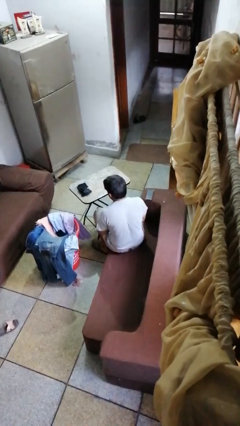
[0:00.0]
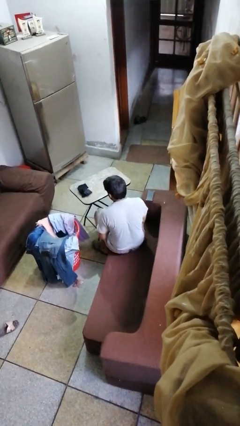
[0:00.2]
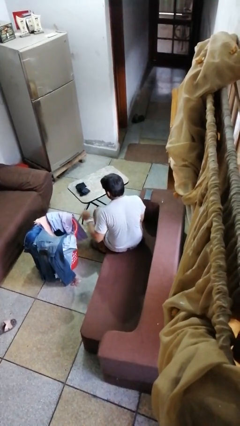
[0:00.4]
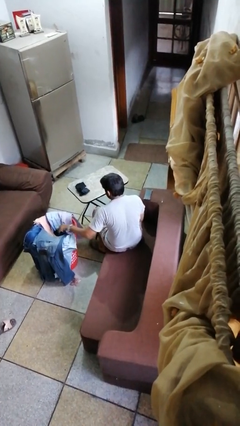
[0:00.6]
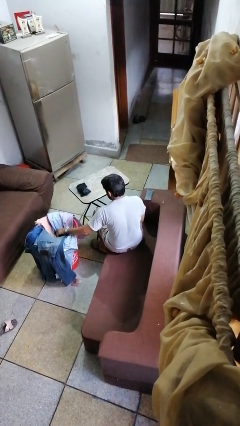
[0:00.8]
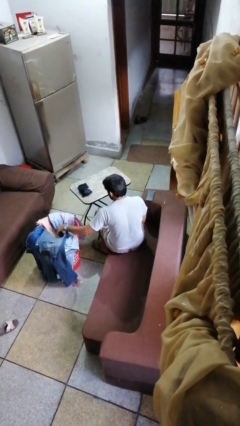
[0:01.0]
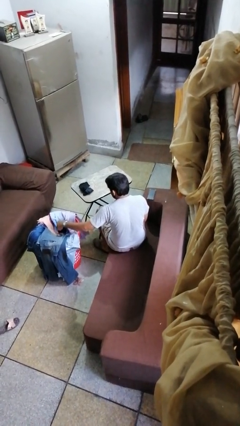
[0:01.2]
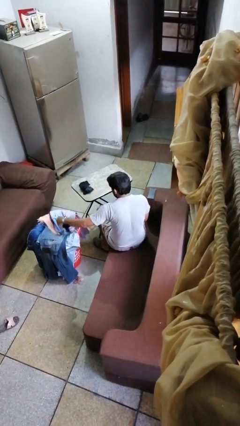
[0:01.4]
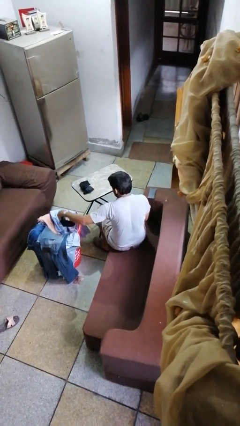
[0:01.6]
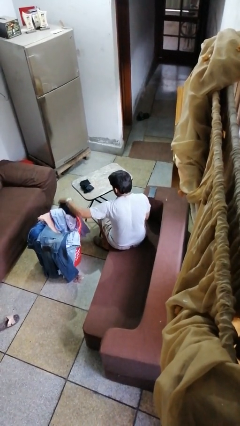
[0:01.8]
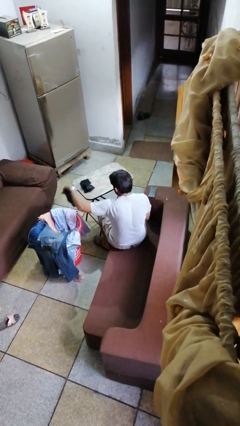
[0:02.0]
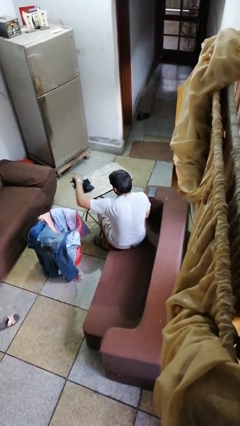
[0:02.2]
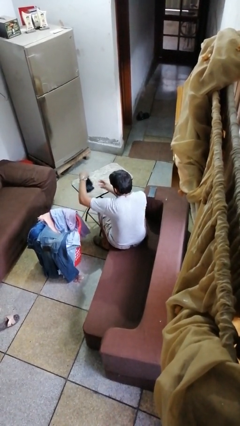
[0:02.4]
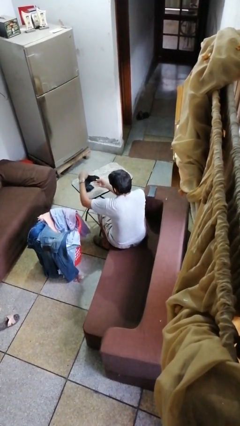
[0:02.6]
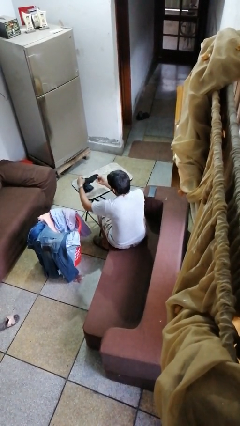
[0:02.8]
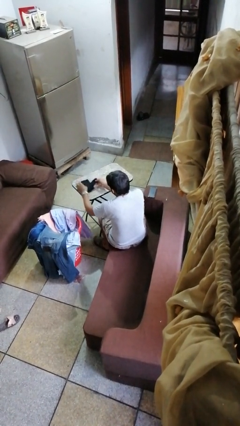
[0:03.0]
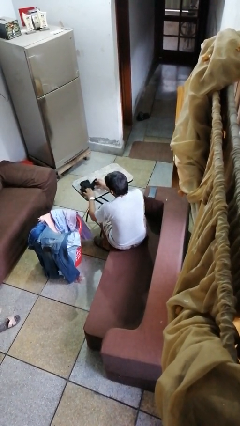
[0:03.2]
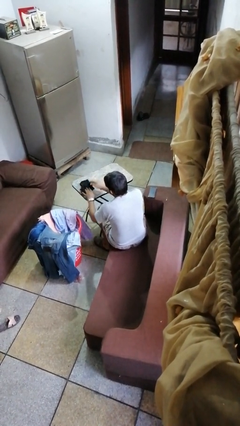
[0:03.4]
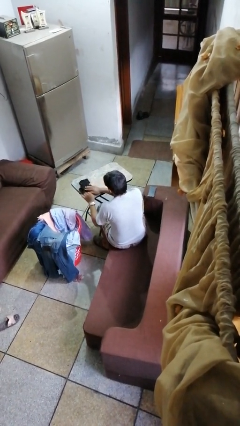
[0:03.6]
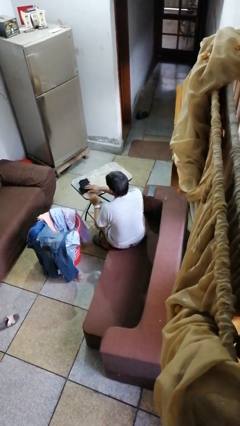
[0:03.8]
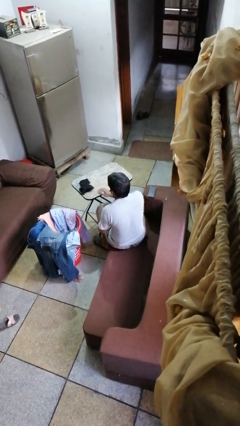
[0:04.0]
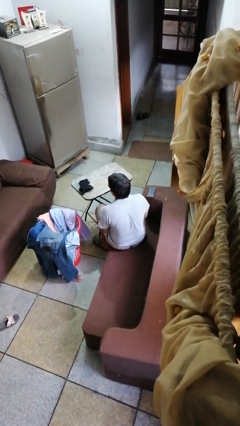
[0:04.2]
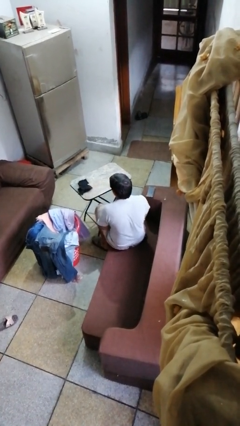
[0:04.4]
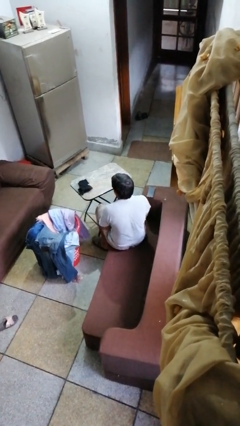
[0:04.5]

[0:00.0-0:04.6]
person folds socks

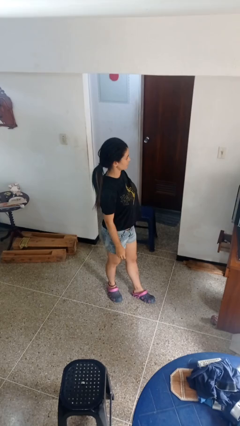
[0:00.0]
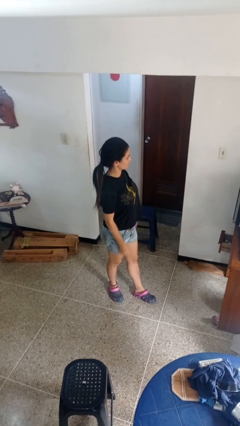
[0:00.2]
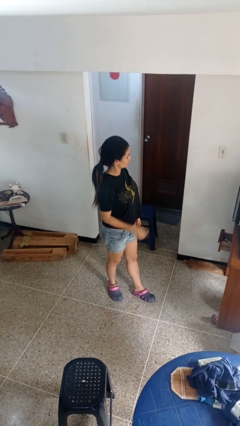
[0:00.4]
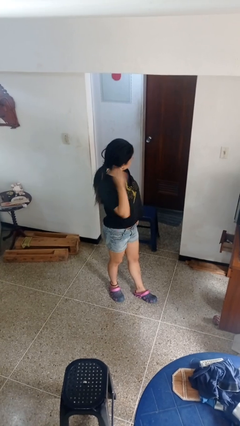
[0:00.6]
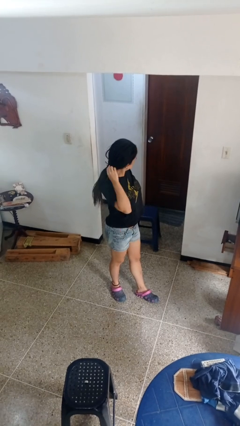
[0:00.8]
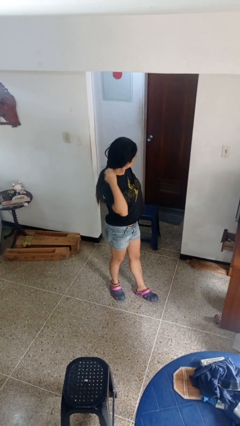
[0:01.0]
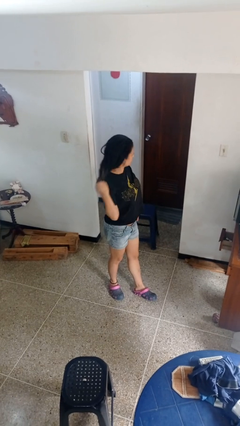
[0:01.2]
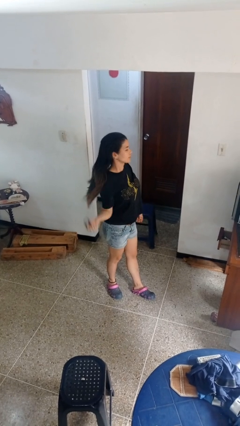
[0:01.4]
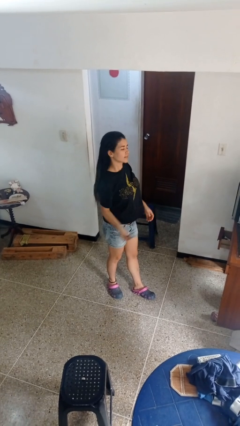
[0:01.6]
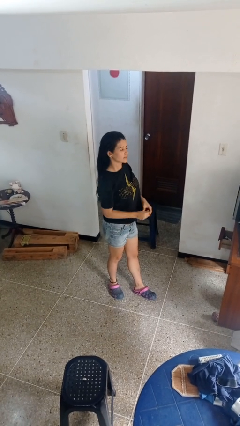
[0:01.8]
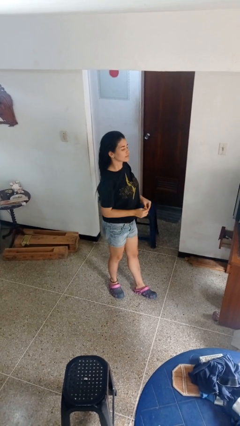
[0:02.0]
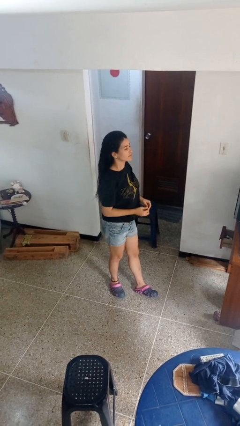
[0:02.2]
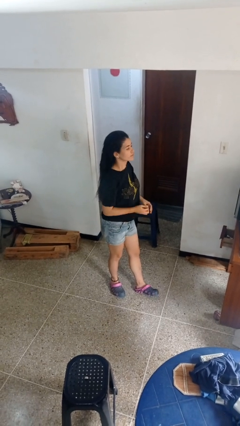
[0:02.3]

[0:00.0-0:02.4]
person takes off hairtie

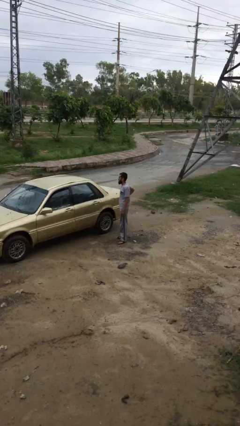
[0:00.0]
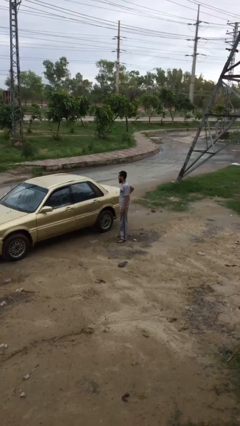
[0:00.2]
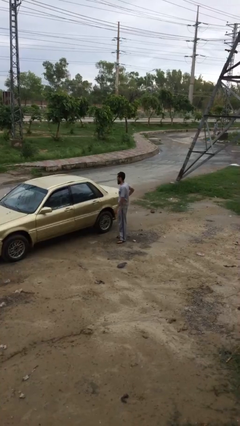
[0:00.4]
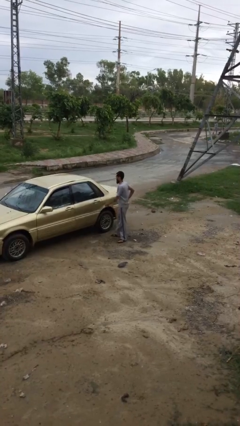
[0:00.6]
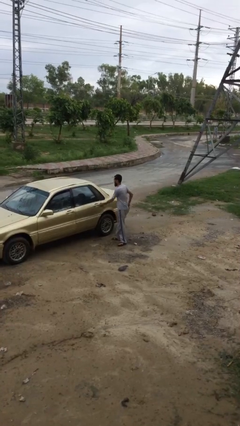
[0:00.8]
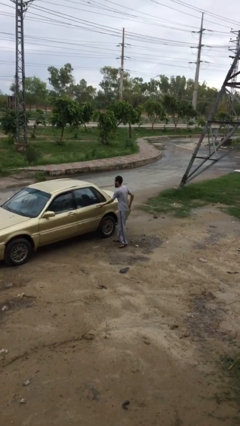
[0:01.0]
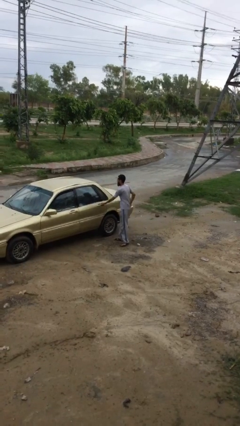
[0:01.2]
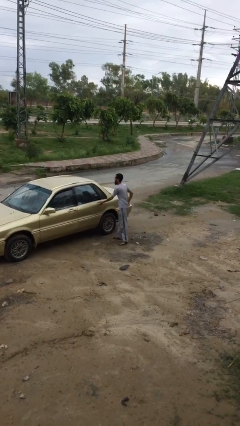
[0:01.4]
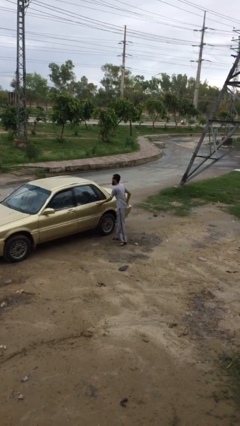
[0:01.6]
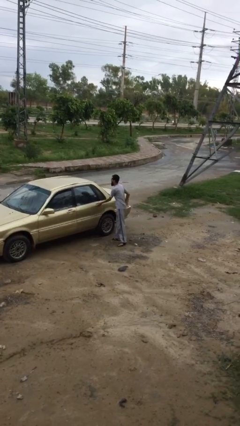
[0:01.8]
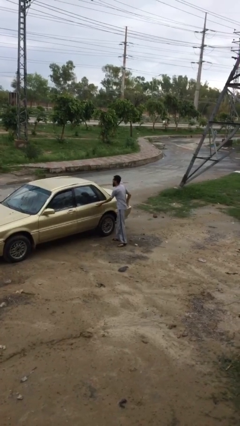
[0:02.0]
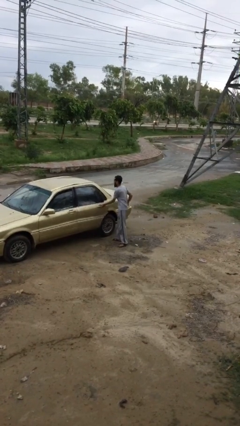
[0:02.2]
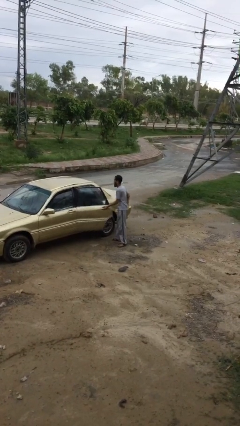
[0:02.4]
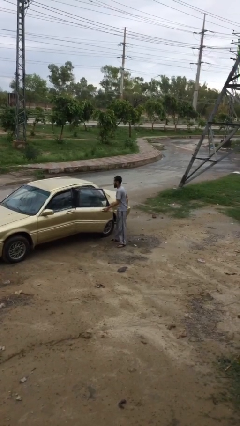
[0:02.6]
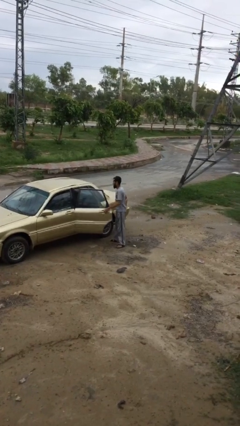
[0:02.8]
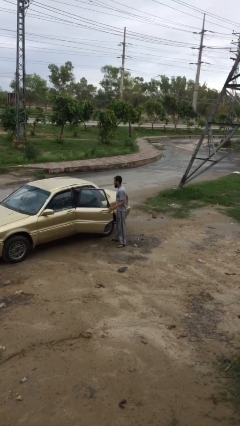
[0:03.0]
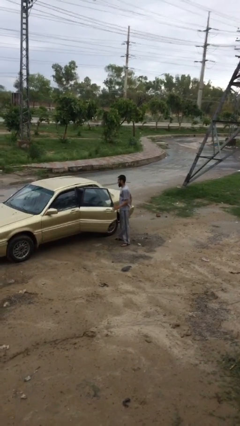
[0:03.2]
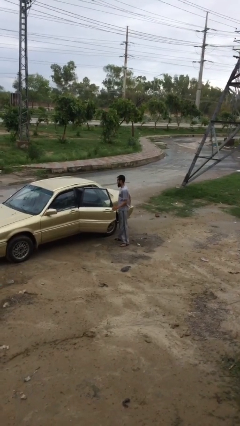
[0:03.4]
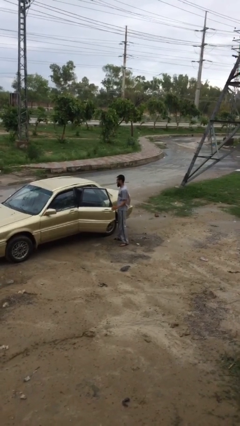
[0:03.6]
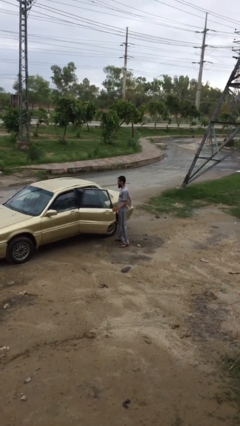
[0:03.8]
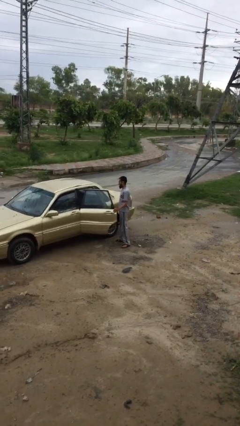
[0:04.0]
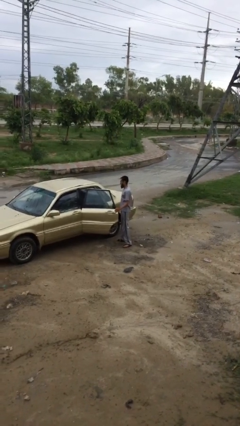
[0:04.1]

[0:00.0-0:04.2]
person opens car door

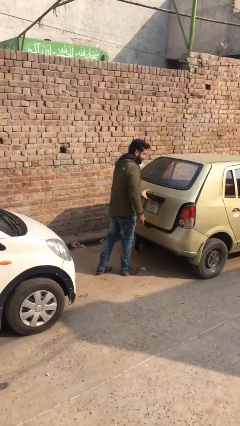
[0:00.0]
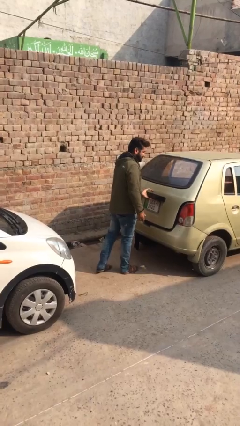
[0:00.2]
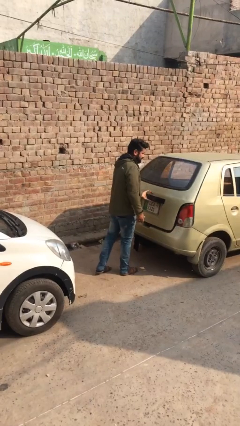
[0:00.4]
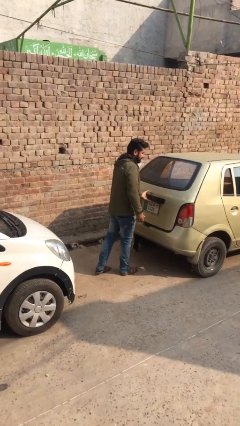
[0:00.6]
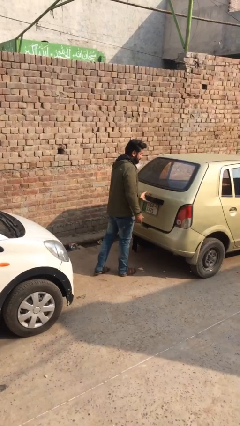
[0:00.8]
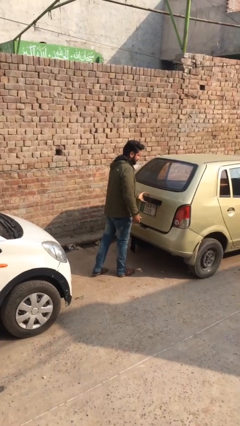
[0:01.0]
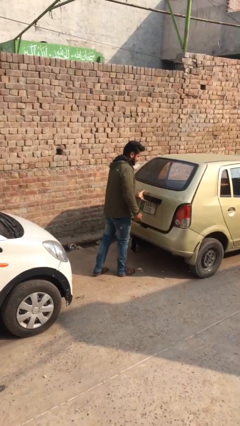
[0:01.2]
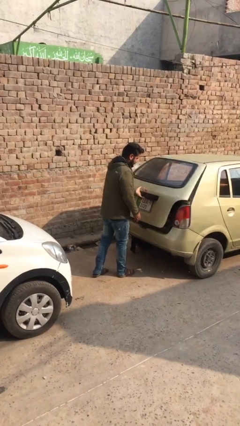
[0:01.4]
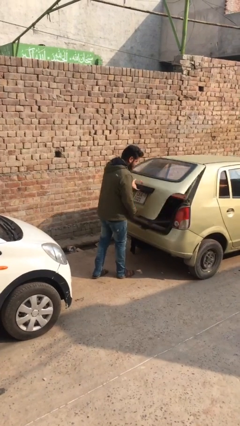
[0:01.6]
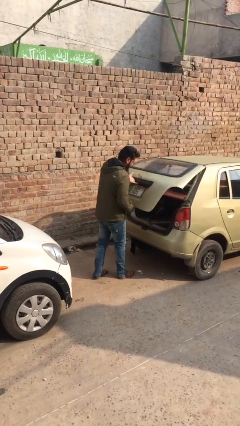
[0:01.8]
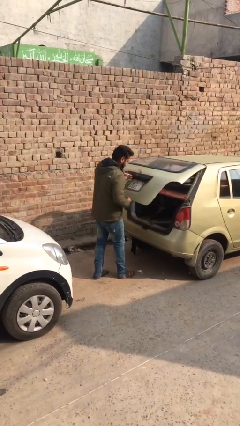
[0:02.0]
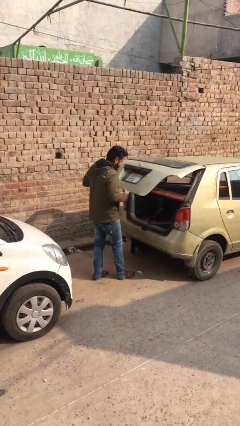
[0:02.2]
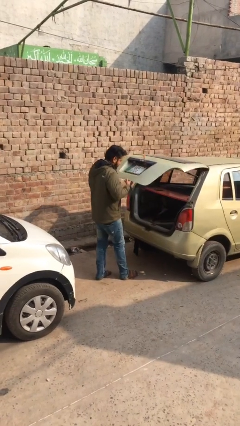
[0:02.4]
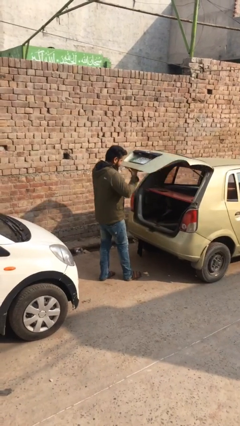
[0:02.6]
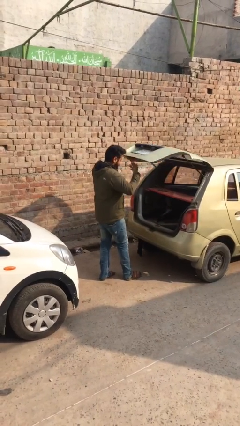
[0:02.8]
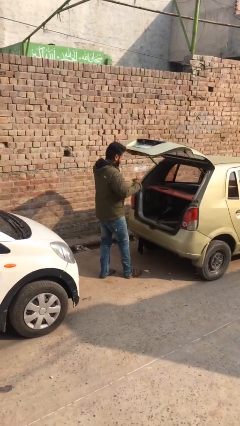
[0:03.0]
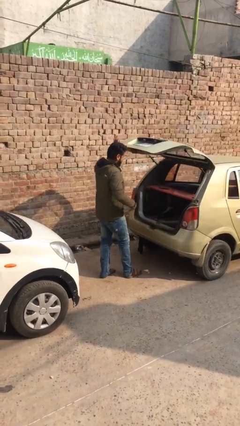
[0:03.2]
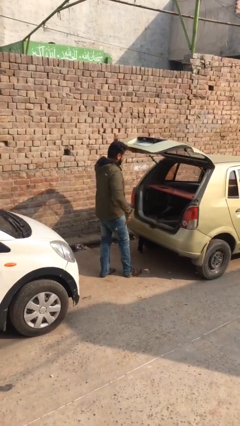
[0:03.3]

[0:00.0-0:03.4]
person opens car trunk

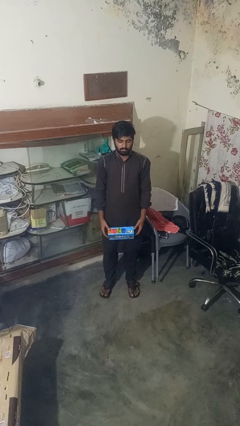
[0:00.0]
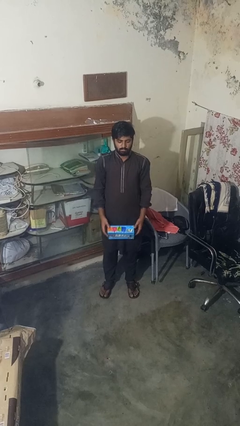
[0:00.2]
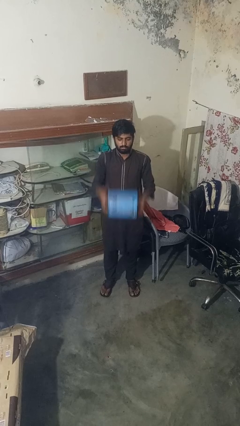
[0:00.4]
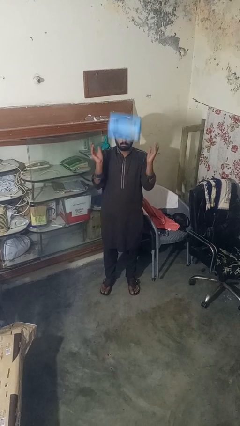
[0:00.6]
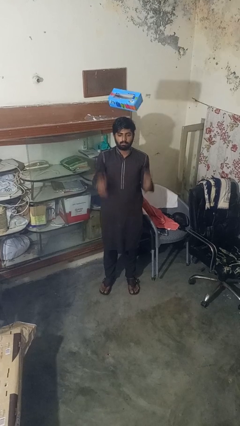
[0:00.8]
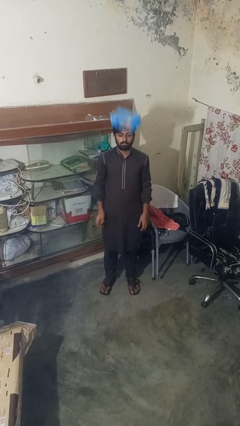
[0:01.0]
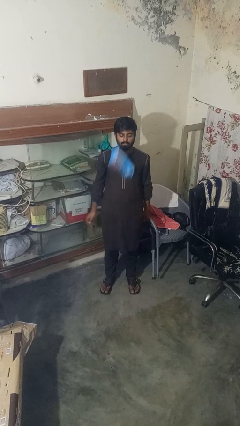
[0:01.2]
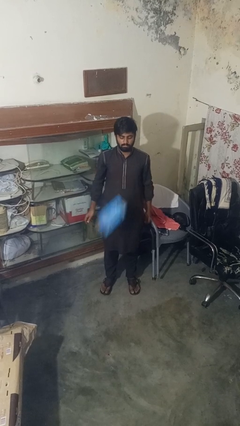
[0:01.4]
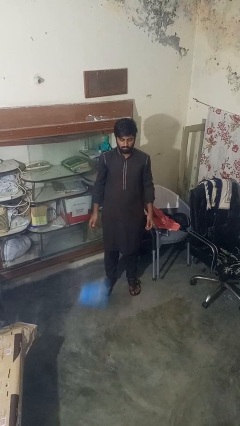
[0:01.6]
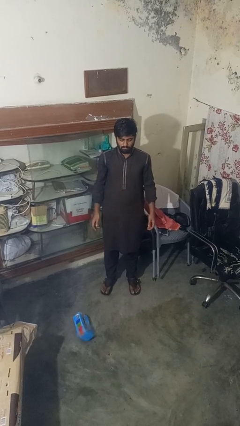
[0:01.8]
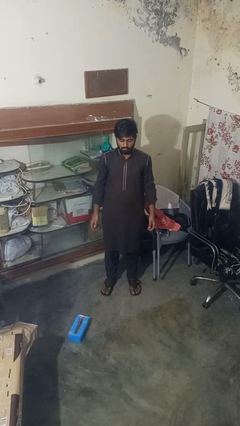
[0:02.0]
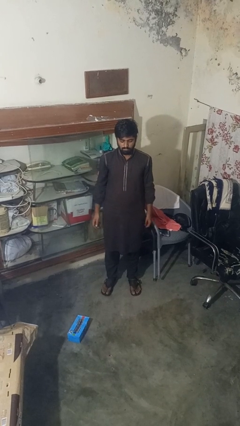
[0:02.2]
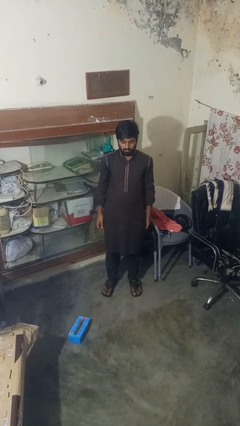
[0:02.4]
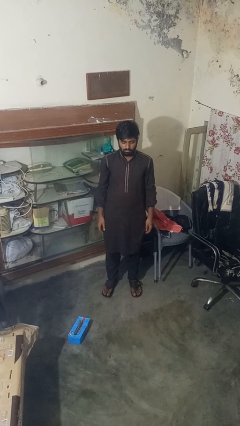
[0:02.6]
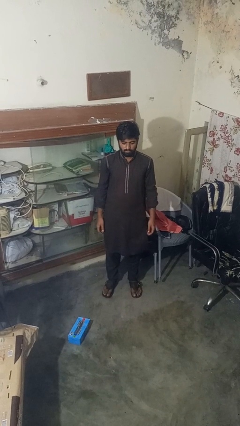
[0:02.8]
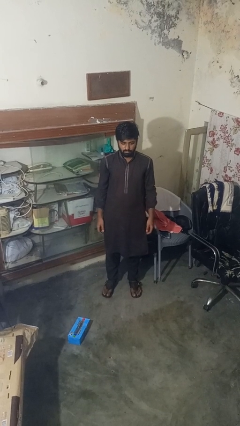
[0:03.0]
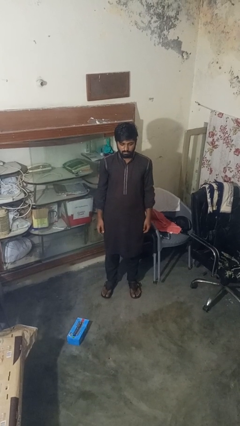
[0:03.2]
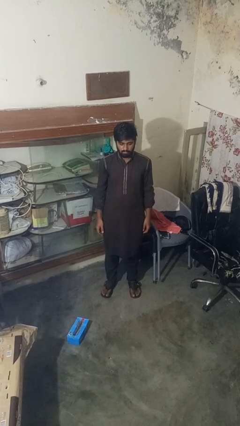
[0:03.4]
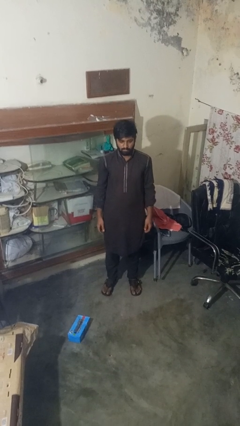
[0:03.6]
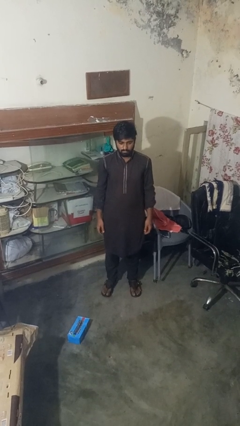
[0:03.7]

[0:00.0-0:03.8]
person throws object into air
